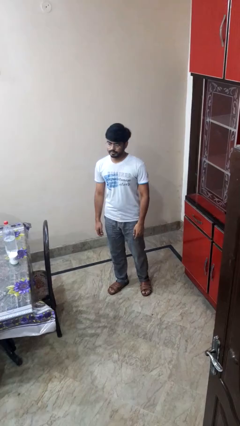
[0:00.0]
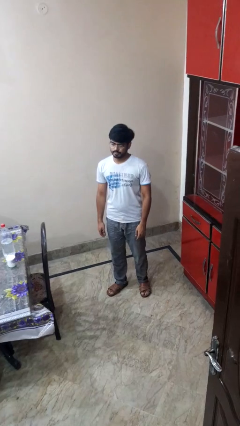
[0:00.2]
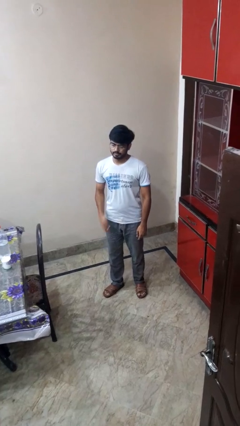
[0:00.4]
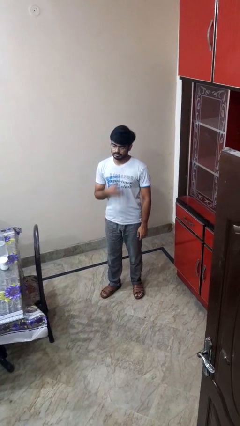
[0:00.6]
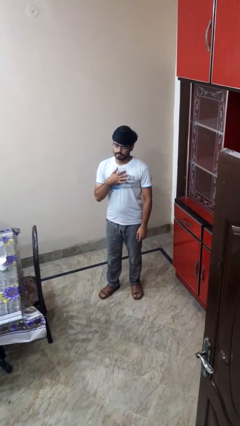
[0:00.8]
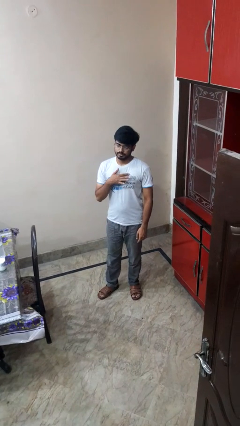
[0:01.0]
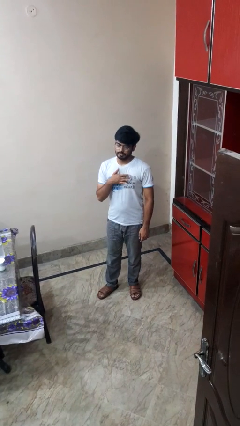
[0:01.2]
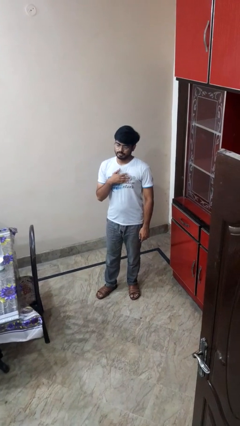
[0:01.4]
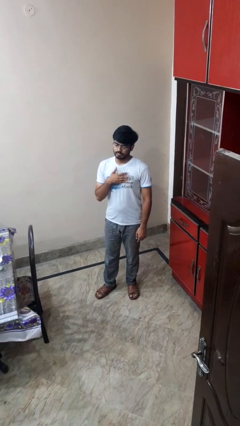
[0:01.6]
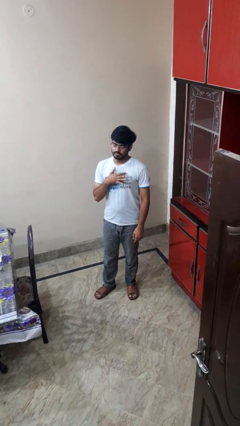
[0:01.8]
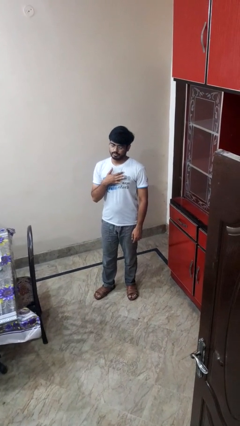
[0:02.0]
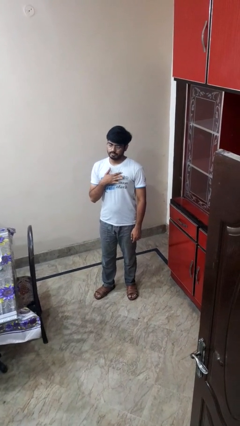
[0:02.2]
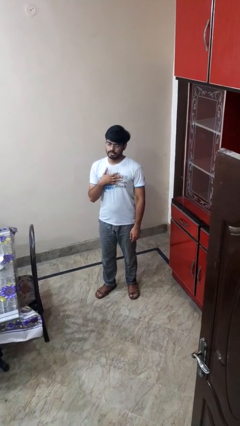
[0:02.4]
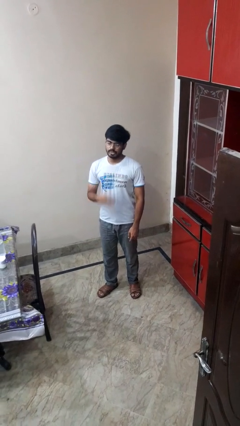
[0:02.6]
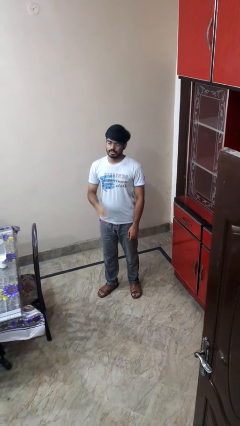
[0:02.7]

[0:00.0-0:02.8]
person drums on chest

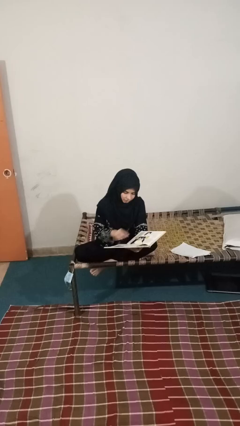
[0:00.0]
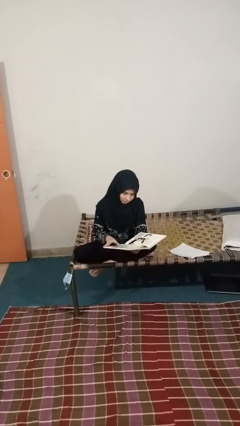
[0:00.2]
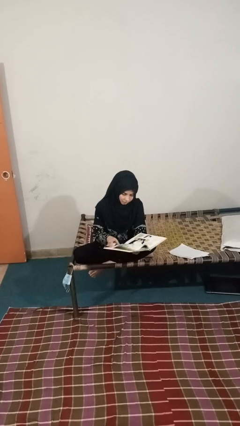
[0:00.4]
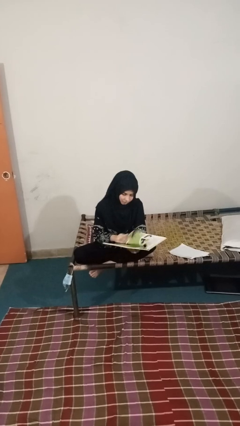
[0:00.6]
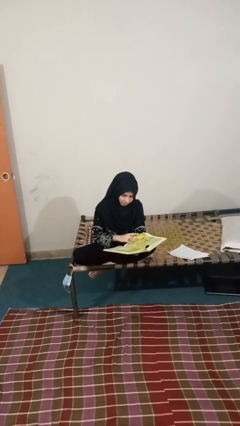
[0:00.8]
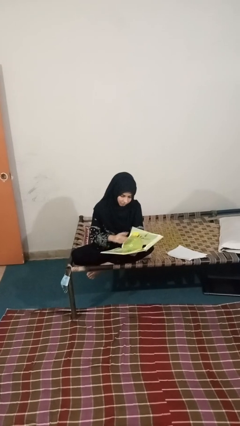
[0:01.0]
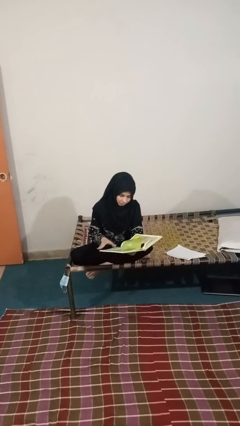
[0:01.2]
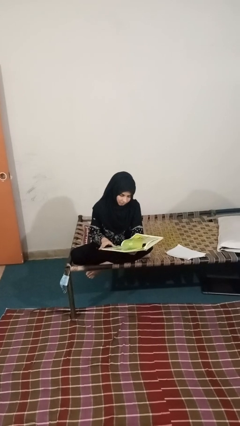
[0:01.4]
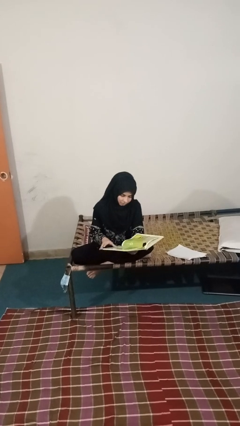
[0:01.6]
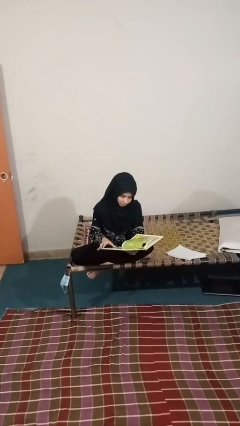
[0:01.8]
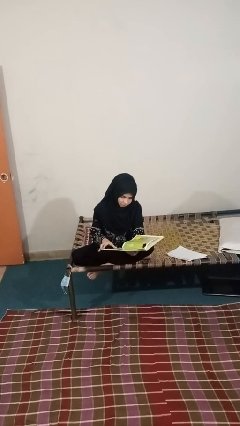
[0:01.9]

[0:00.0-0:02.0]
person reads magazine

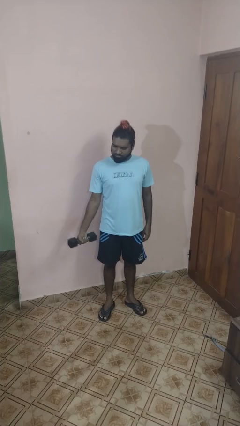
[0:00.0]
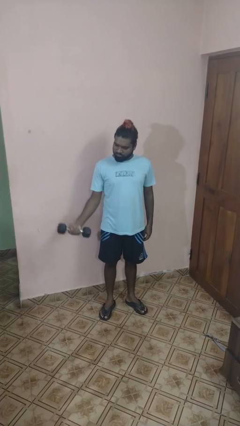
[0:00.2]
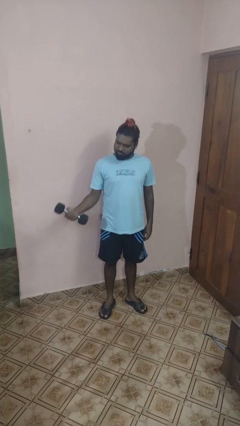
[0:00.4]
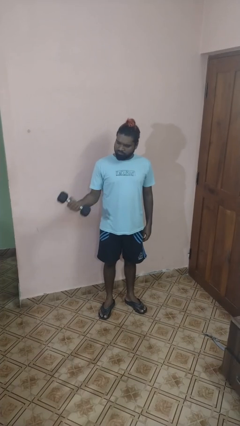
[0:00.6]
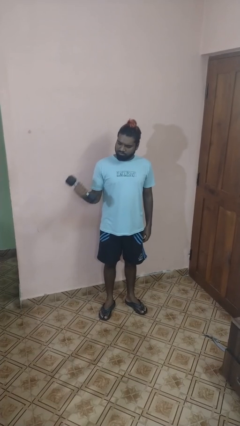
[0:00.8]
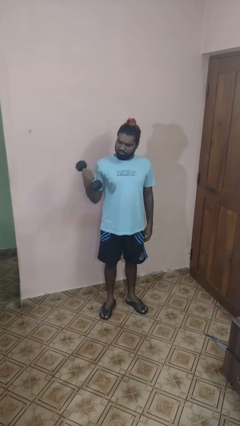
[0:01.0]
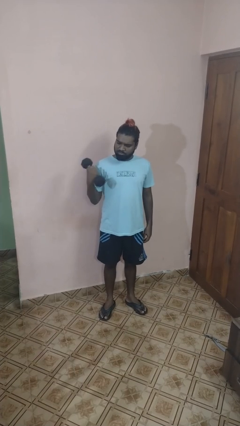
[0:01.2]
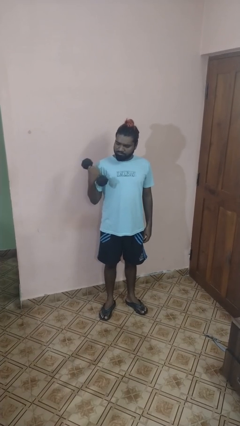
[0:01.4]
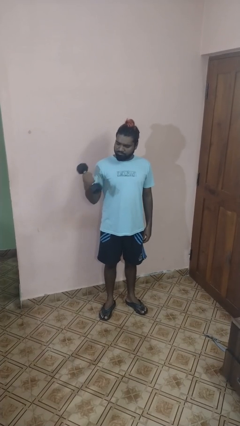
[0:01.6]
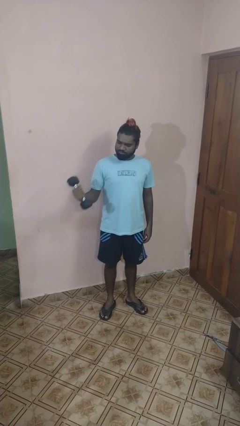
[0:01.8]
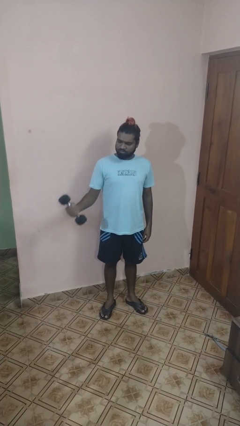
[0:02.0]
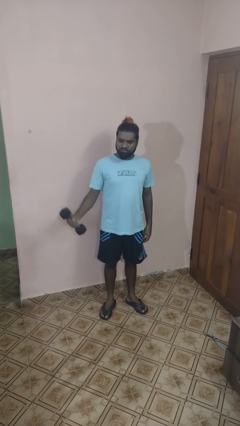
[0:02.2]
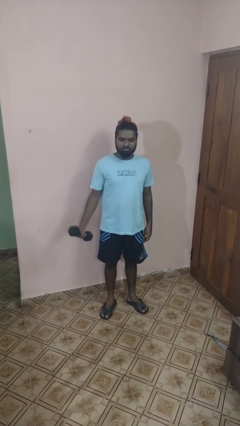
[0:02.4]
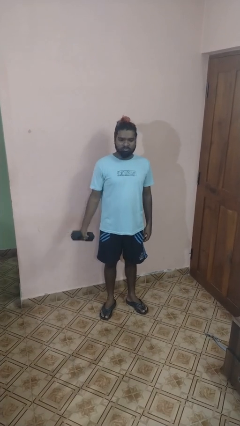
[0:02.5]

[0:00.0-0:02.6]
person lifts dumbbells

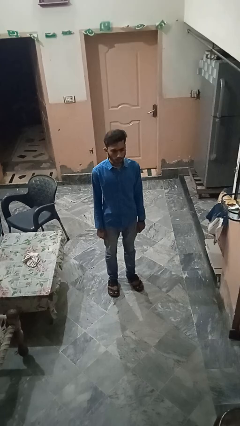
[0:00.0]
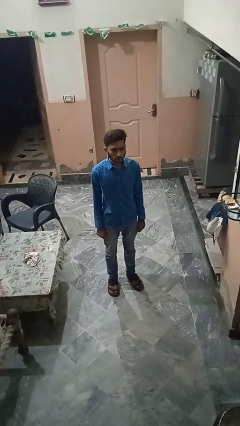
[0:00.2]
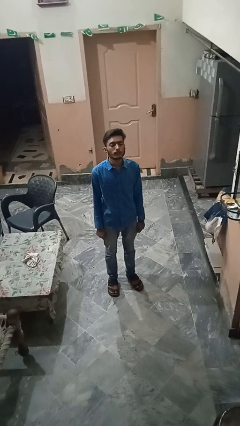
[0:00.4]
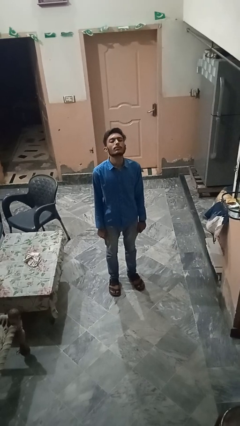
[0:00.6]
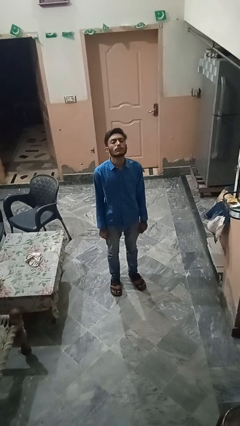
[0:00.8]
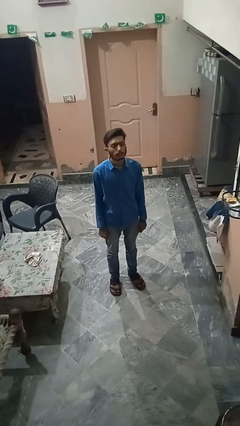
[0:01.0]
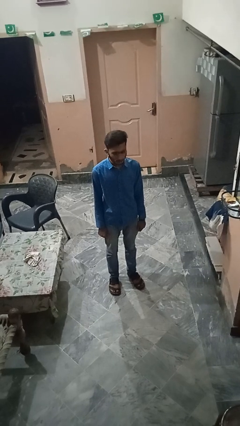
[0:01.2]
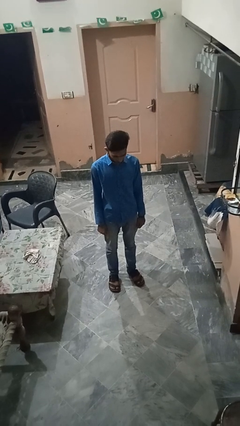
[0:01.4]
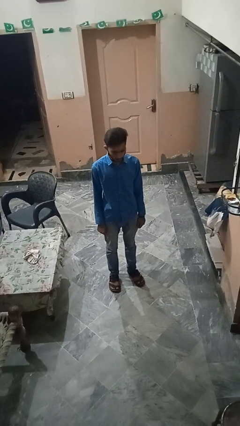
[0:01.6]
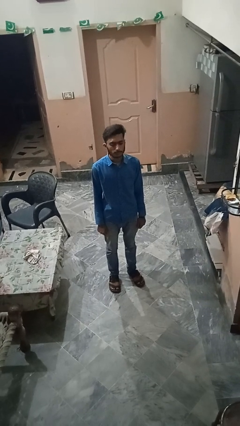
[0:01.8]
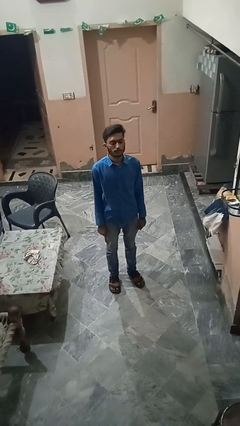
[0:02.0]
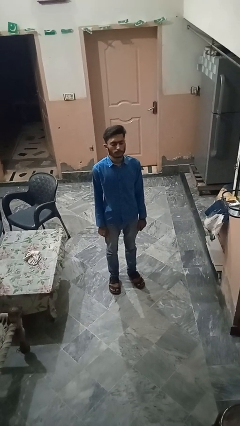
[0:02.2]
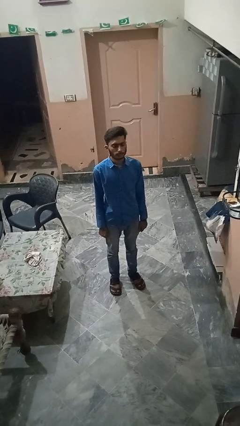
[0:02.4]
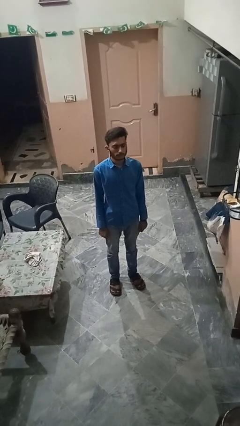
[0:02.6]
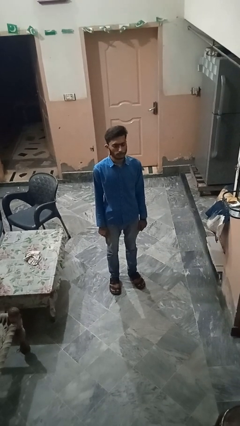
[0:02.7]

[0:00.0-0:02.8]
person nods head

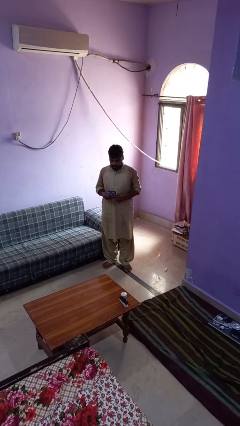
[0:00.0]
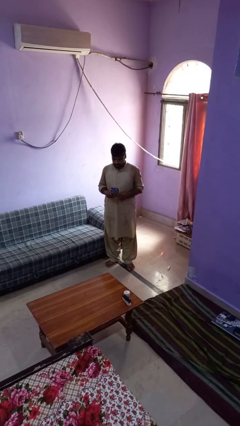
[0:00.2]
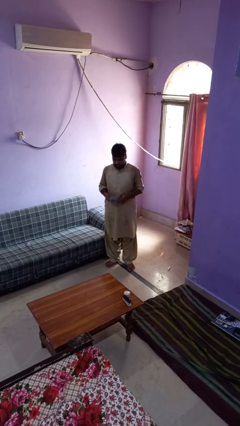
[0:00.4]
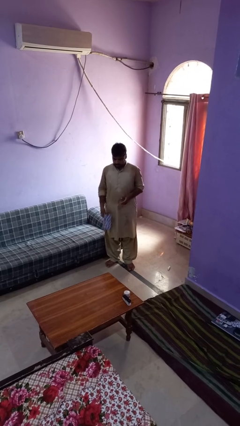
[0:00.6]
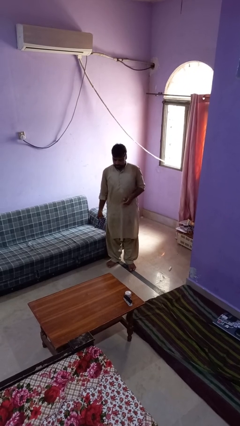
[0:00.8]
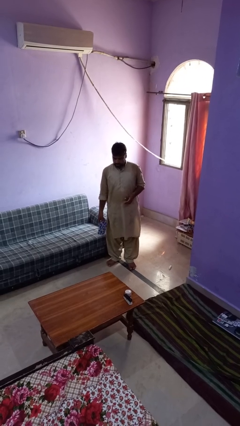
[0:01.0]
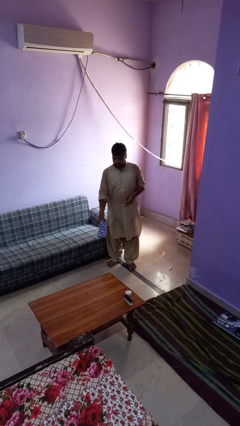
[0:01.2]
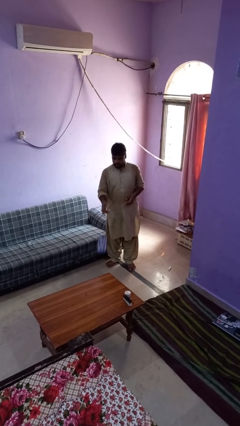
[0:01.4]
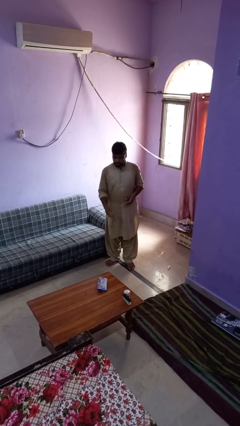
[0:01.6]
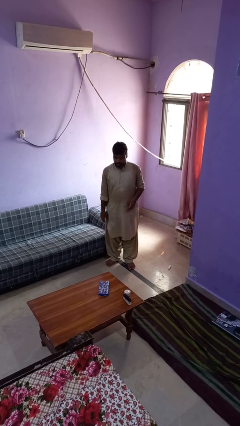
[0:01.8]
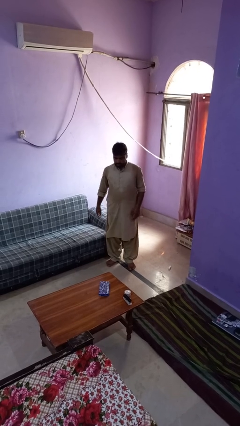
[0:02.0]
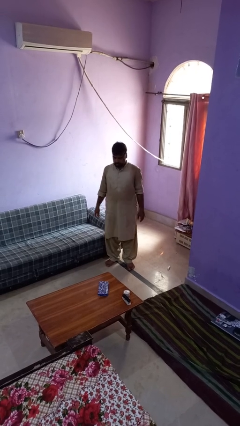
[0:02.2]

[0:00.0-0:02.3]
person throws object on table

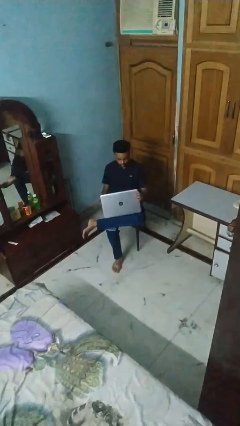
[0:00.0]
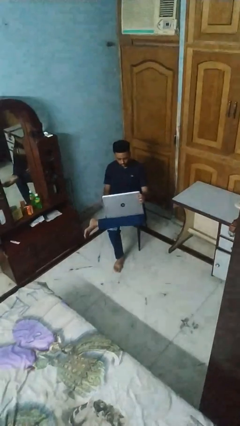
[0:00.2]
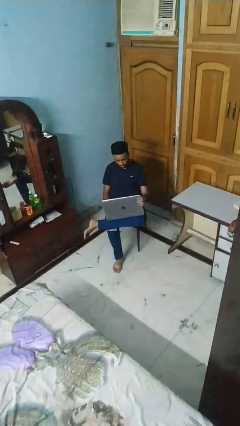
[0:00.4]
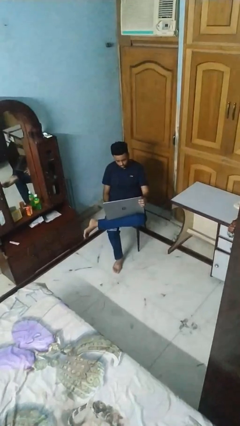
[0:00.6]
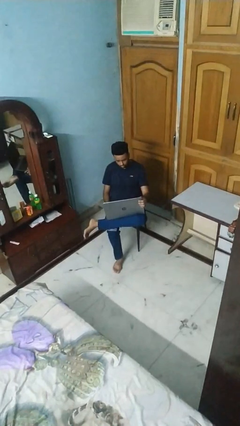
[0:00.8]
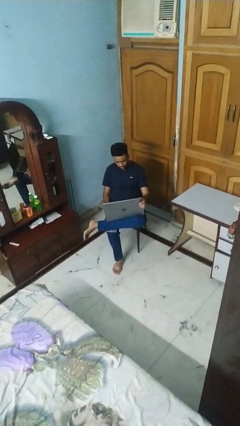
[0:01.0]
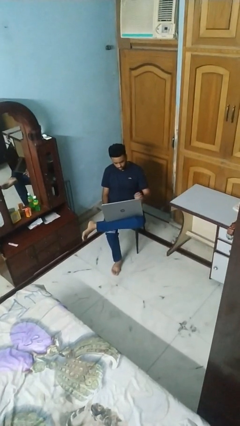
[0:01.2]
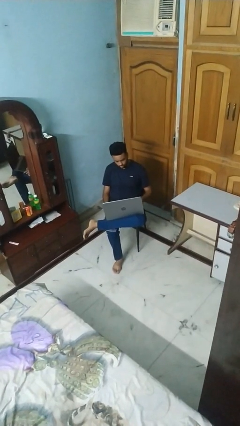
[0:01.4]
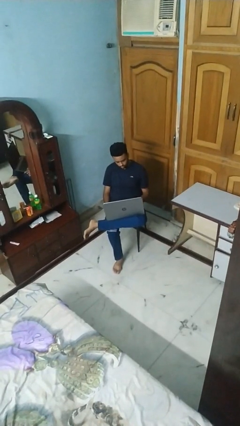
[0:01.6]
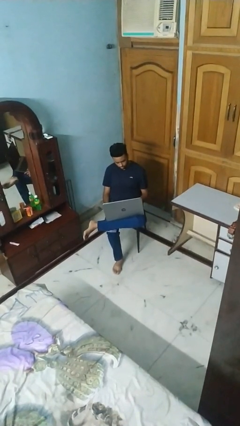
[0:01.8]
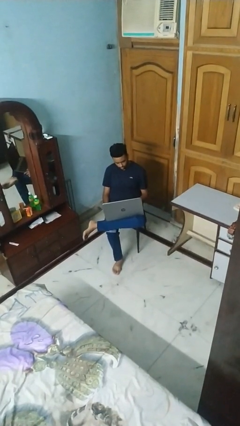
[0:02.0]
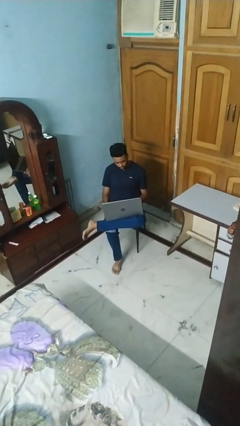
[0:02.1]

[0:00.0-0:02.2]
person opens laptop

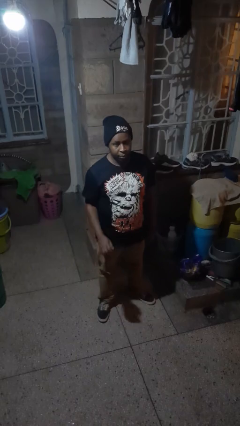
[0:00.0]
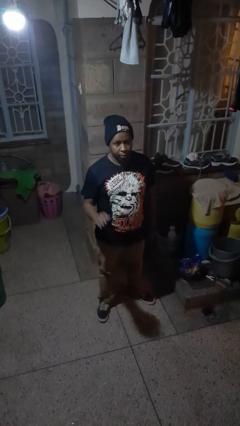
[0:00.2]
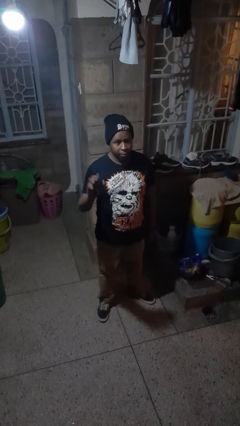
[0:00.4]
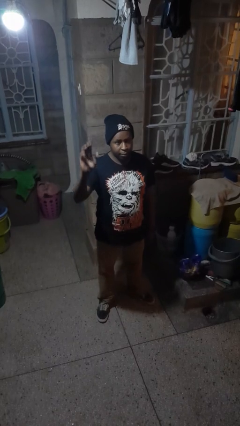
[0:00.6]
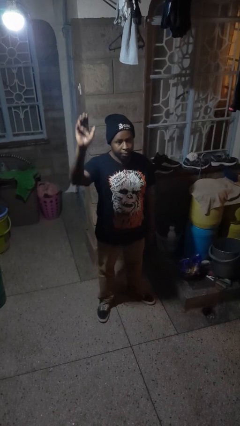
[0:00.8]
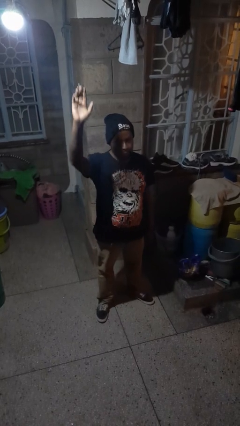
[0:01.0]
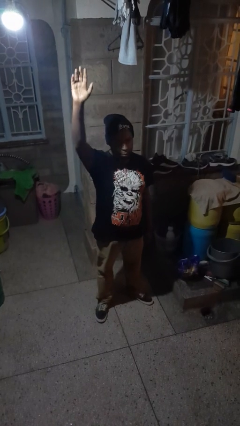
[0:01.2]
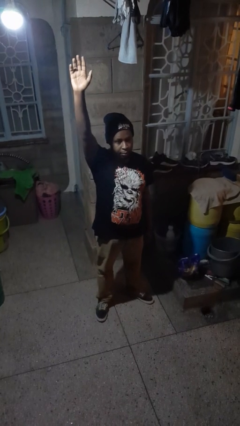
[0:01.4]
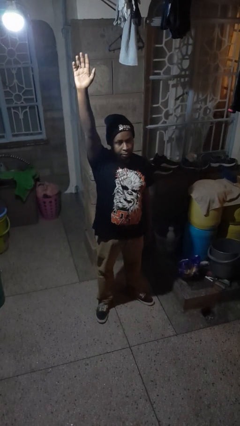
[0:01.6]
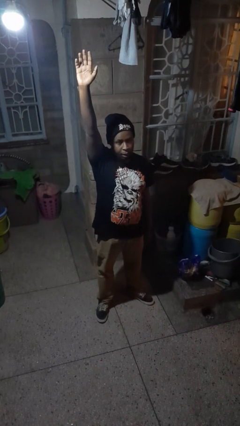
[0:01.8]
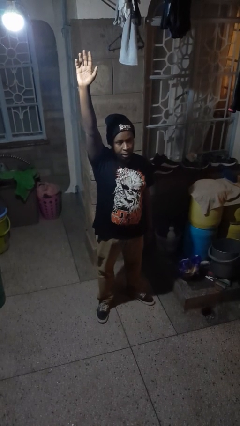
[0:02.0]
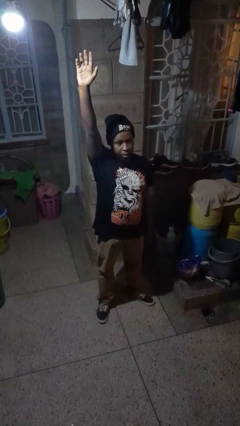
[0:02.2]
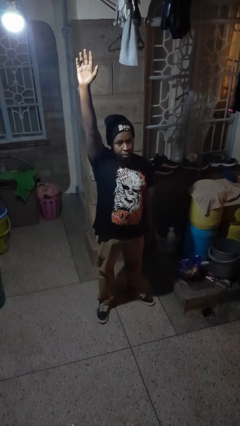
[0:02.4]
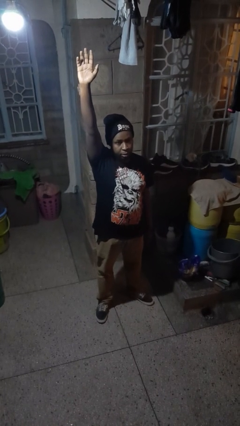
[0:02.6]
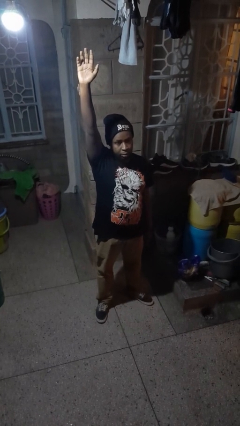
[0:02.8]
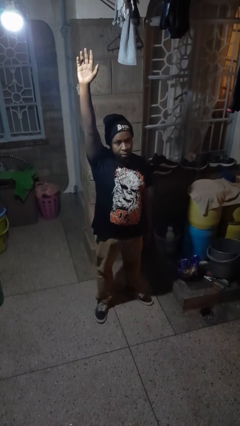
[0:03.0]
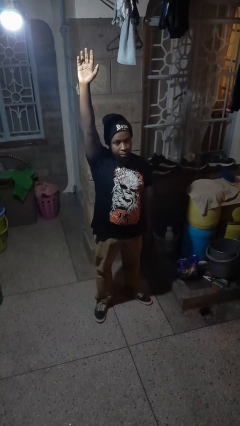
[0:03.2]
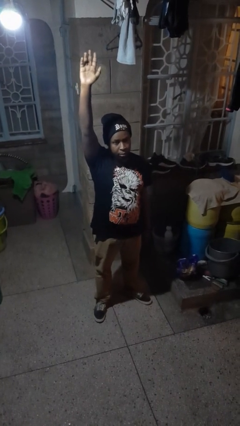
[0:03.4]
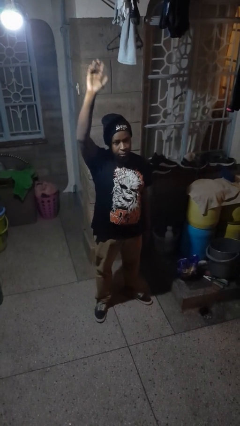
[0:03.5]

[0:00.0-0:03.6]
person gestures raise hand
